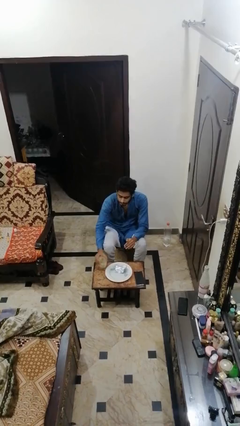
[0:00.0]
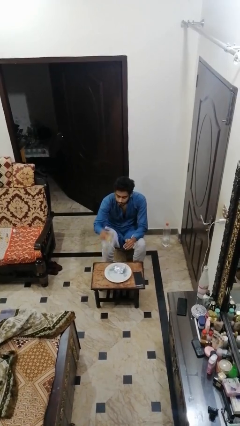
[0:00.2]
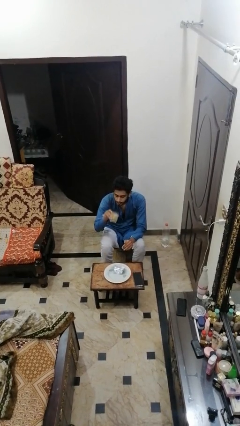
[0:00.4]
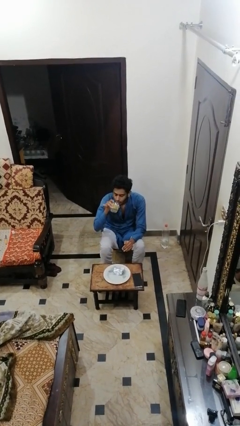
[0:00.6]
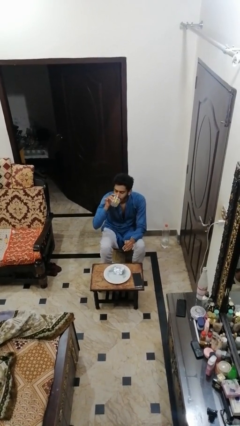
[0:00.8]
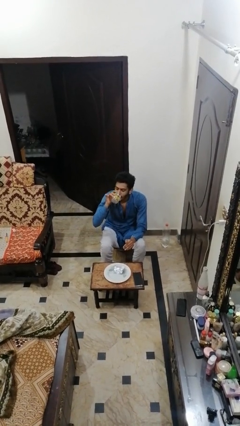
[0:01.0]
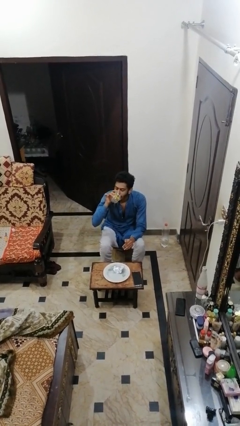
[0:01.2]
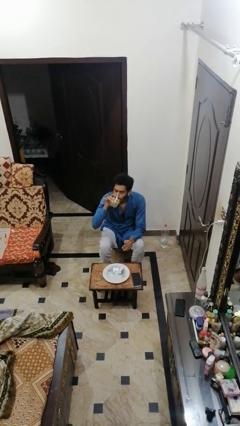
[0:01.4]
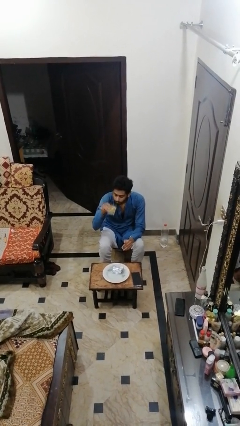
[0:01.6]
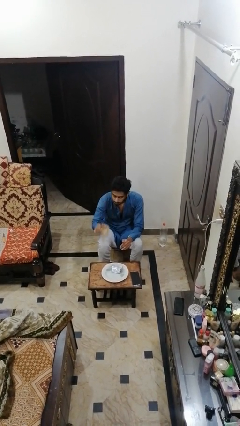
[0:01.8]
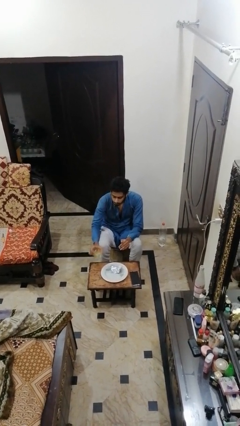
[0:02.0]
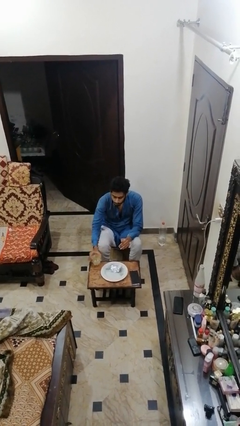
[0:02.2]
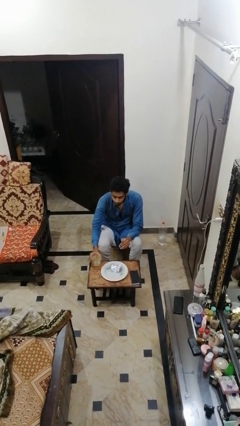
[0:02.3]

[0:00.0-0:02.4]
person drinks from cup

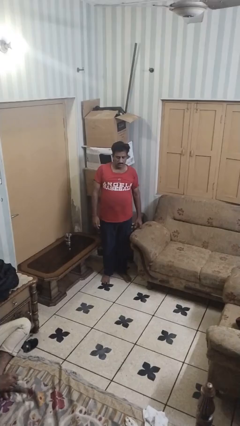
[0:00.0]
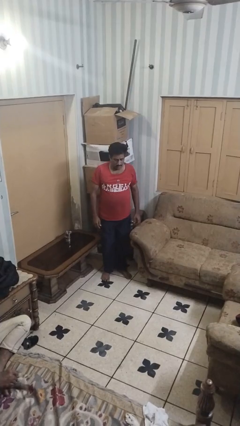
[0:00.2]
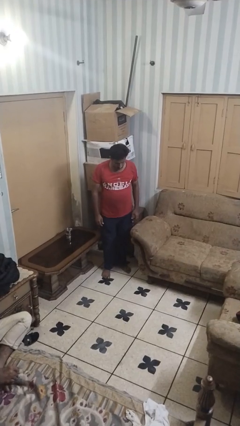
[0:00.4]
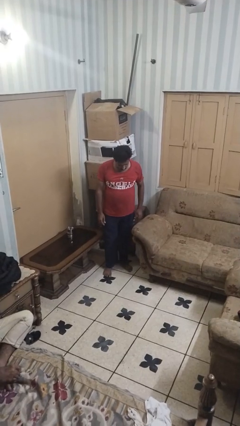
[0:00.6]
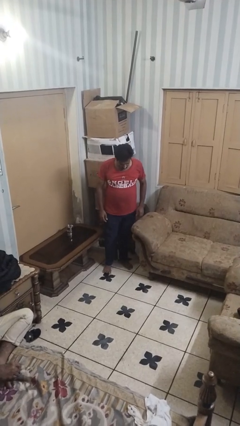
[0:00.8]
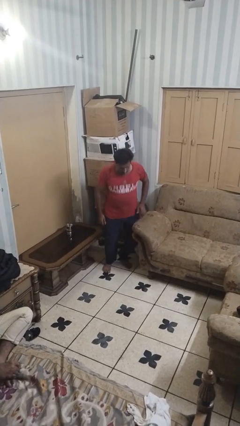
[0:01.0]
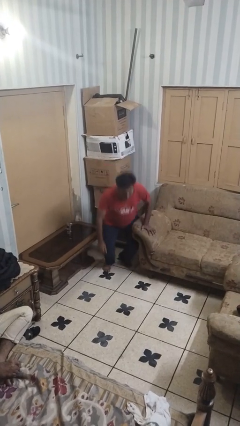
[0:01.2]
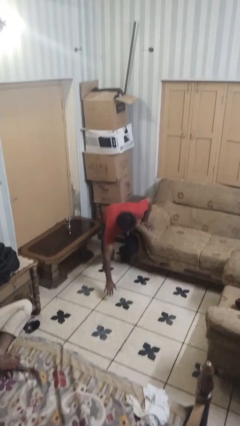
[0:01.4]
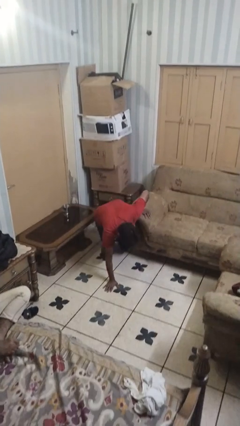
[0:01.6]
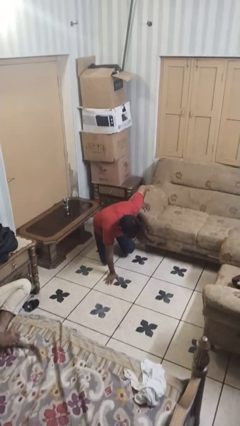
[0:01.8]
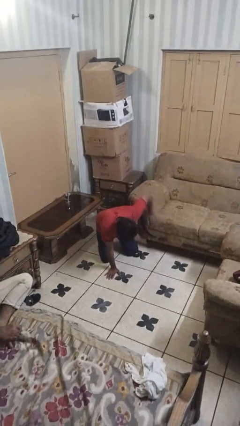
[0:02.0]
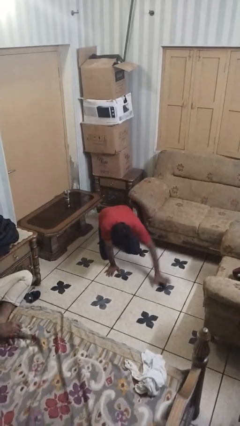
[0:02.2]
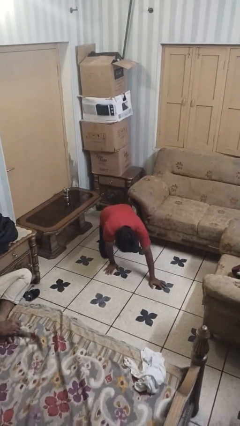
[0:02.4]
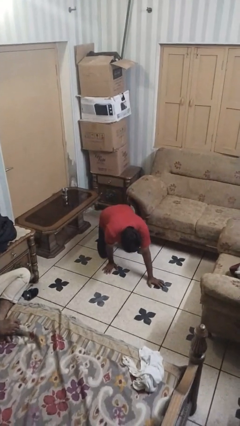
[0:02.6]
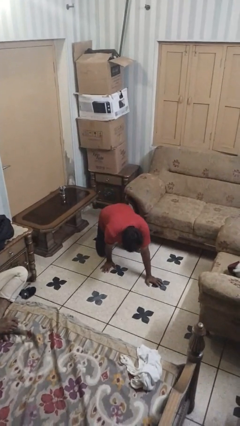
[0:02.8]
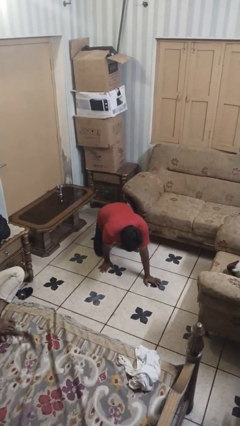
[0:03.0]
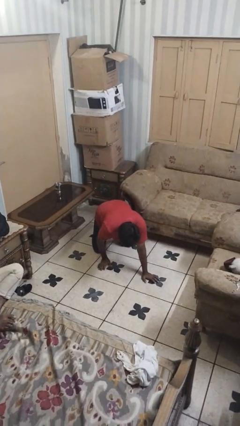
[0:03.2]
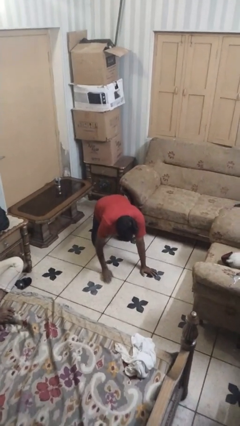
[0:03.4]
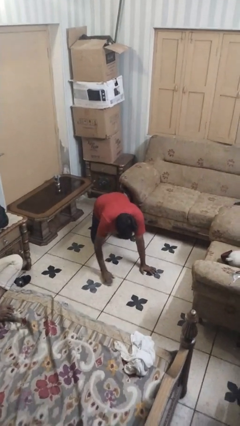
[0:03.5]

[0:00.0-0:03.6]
person trips on object on floor

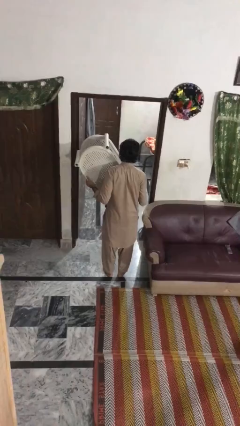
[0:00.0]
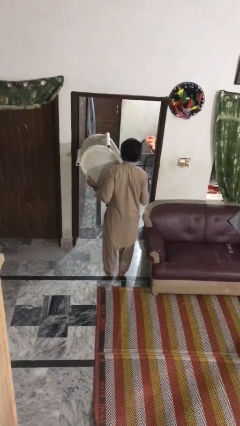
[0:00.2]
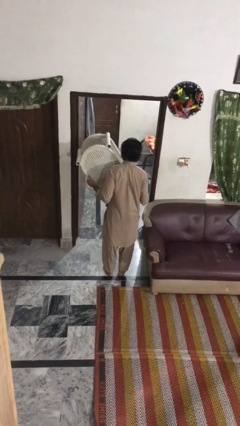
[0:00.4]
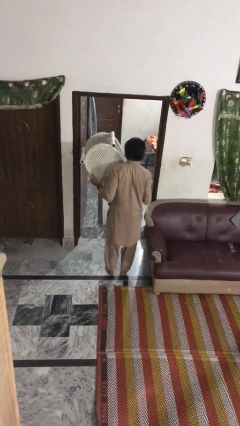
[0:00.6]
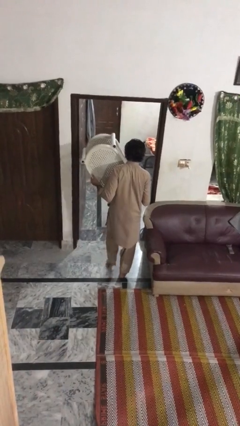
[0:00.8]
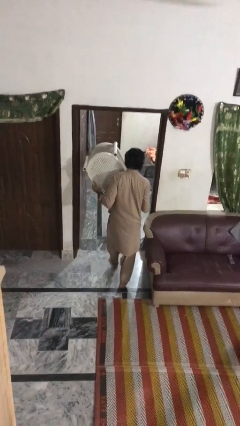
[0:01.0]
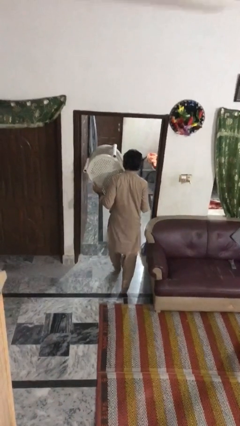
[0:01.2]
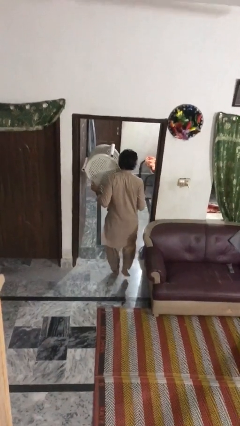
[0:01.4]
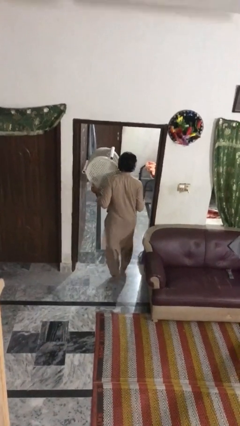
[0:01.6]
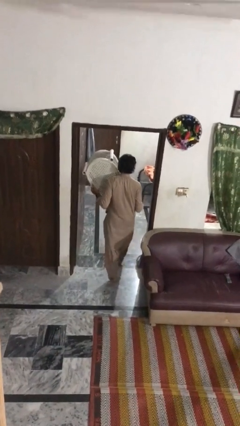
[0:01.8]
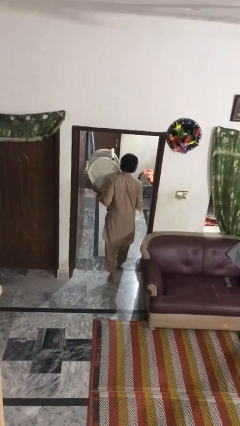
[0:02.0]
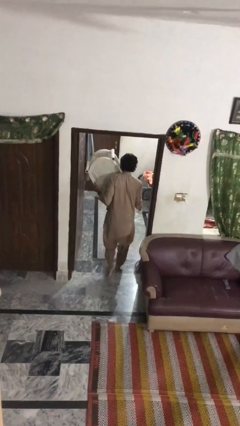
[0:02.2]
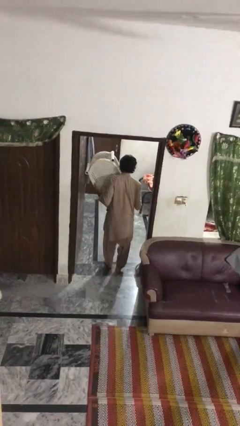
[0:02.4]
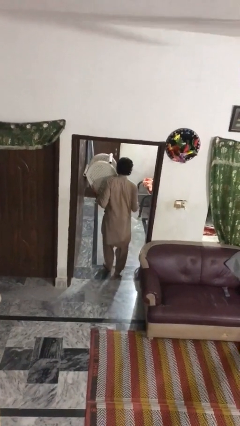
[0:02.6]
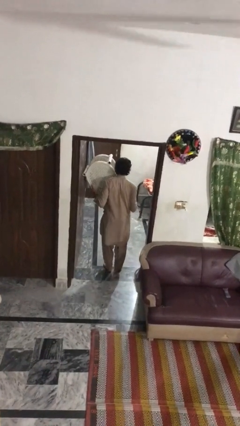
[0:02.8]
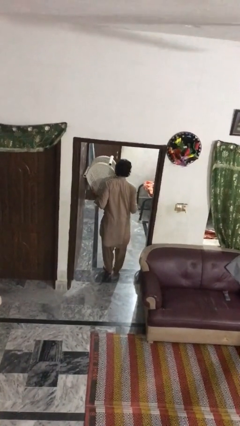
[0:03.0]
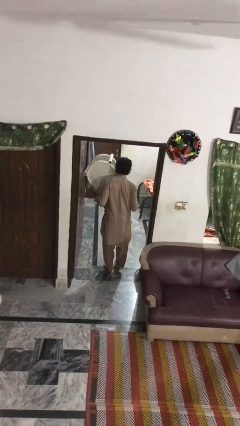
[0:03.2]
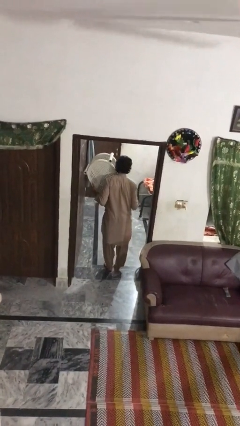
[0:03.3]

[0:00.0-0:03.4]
person carries furniture

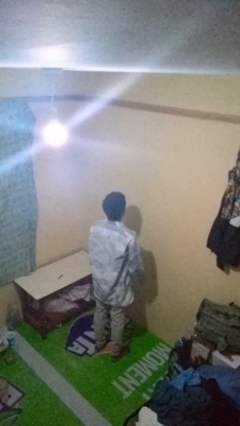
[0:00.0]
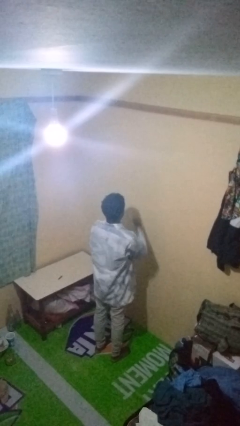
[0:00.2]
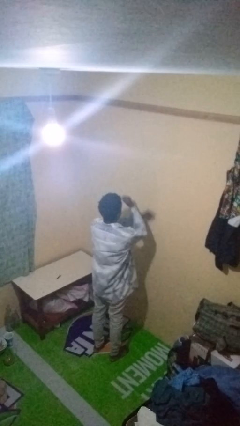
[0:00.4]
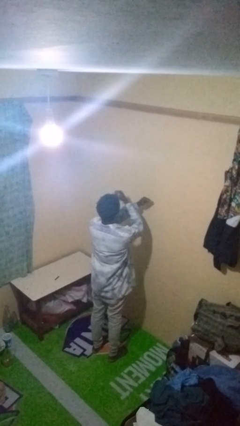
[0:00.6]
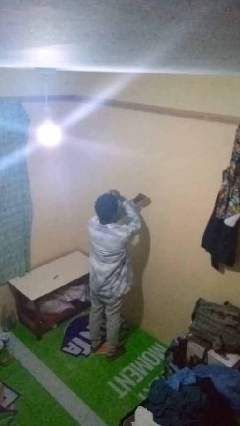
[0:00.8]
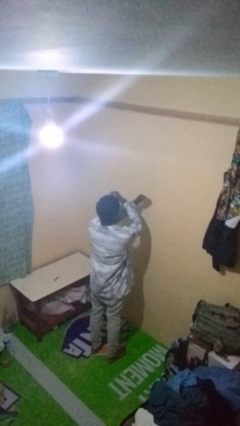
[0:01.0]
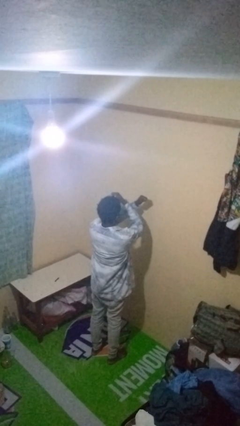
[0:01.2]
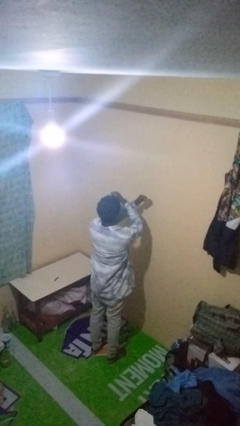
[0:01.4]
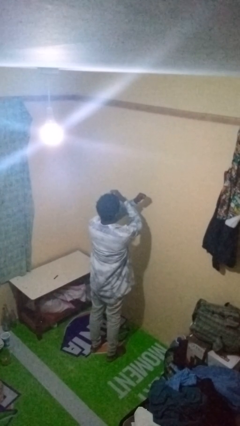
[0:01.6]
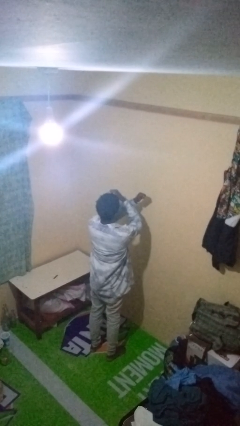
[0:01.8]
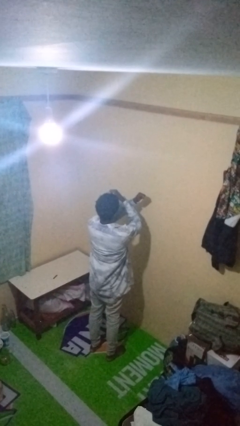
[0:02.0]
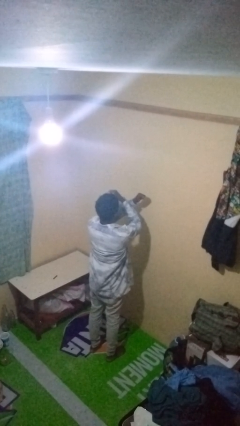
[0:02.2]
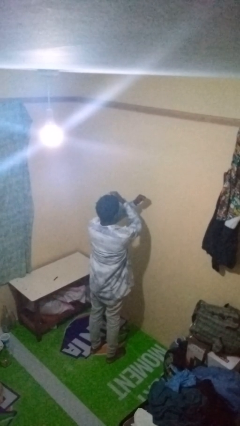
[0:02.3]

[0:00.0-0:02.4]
person gestures arms x

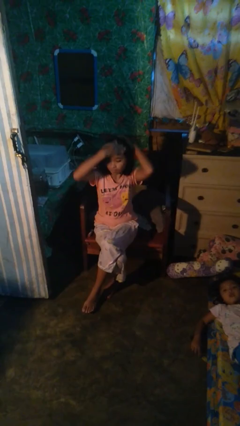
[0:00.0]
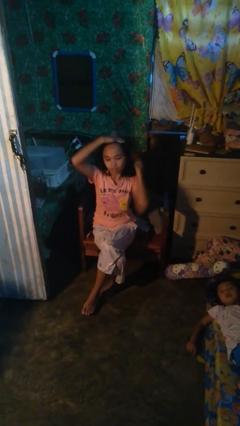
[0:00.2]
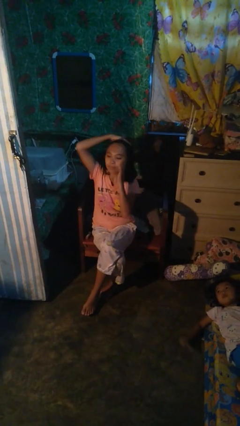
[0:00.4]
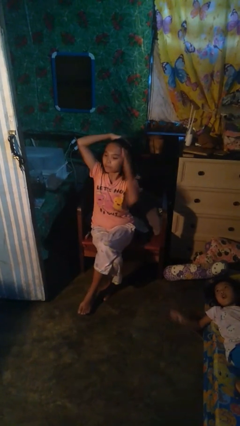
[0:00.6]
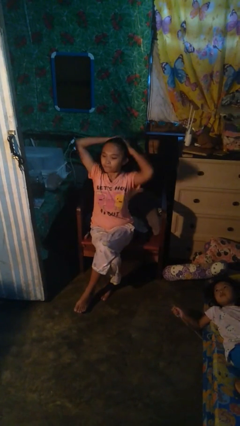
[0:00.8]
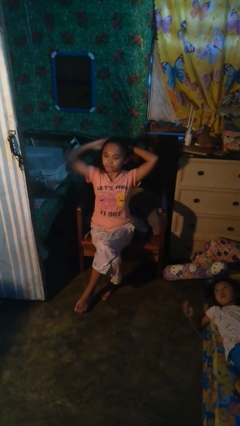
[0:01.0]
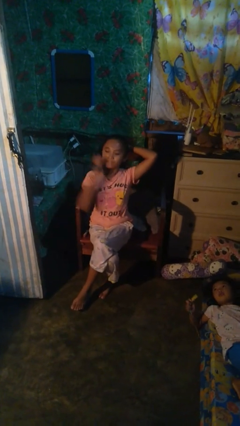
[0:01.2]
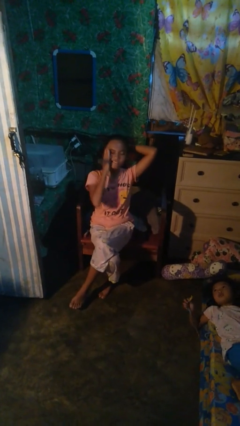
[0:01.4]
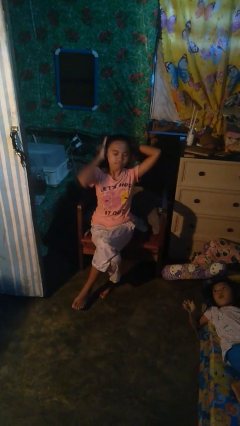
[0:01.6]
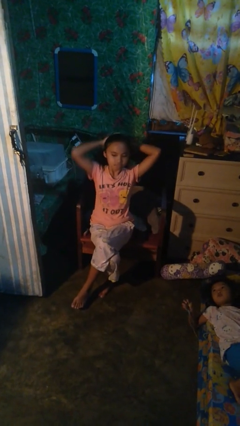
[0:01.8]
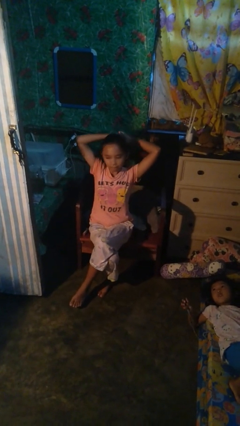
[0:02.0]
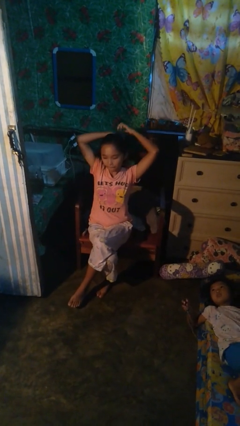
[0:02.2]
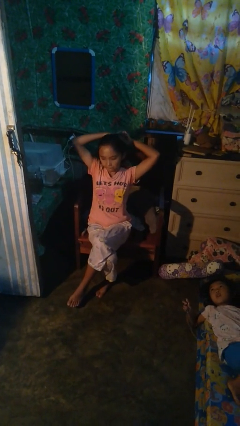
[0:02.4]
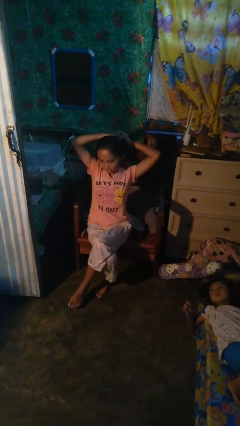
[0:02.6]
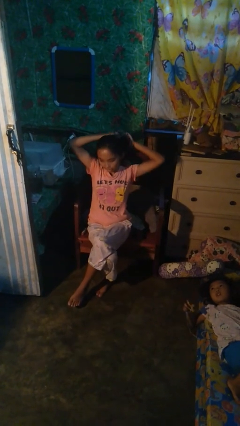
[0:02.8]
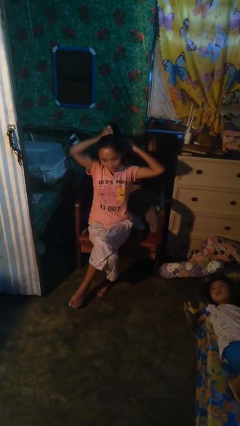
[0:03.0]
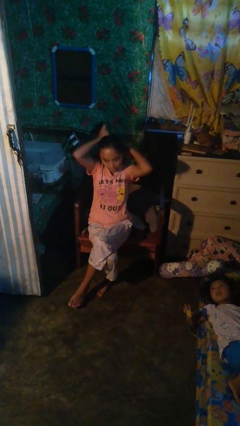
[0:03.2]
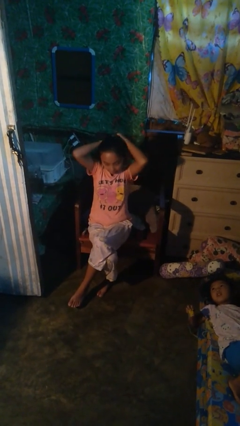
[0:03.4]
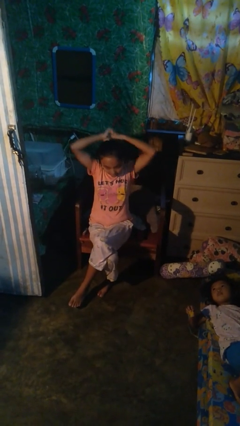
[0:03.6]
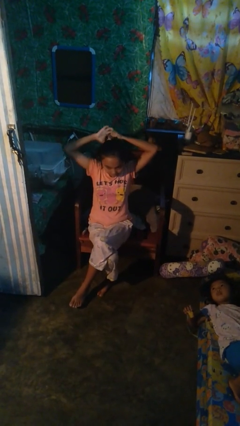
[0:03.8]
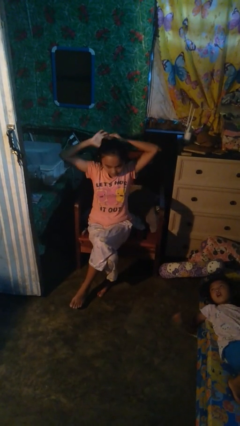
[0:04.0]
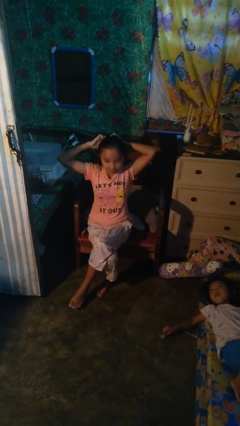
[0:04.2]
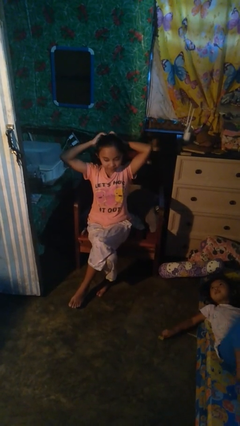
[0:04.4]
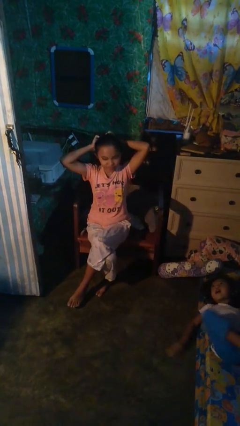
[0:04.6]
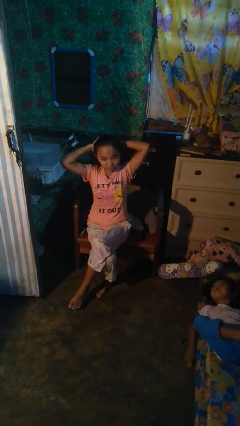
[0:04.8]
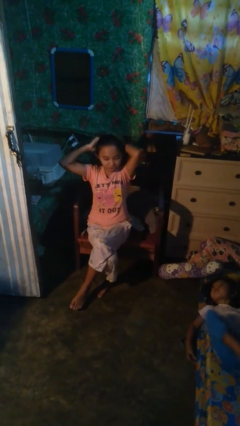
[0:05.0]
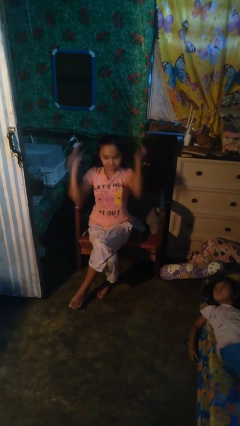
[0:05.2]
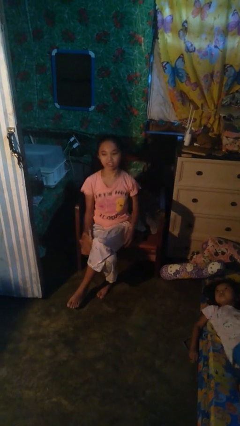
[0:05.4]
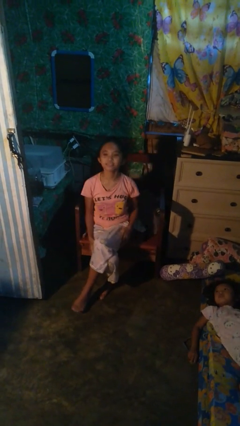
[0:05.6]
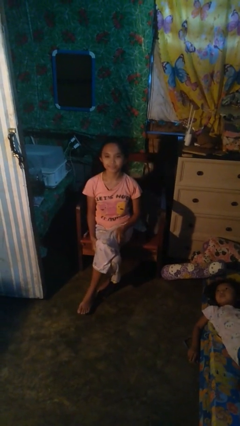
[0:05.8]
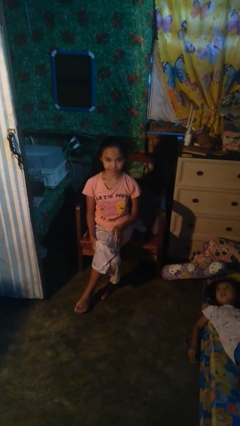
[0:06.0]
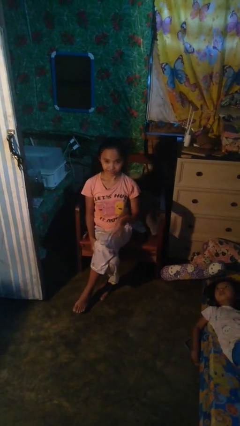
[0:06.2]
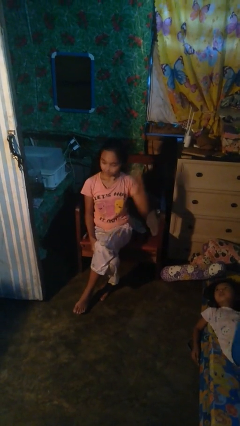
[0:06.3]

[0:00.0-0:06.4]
person puts hair in ponytail
